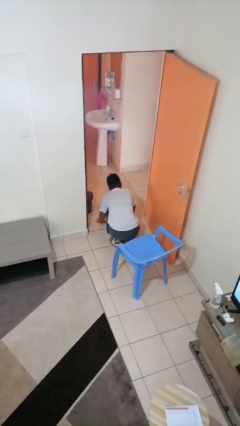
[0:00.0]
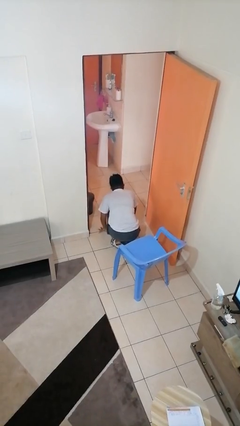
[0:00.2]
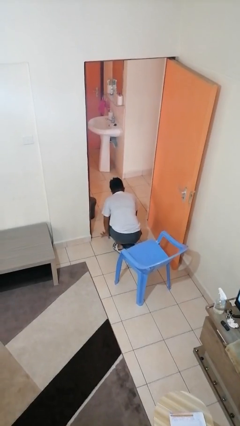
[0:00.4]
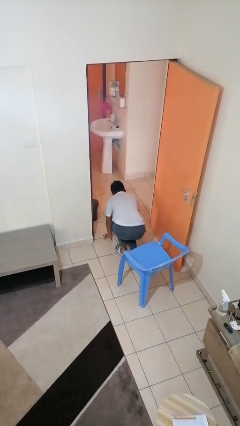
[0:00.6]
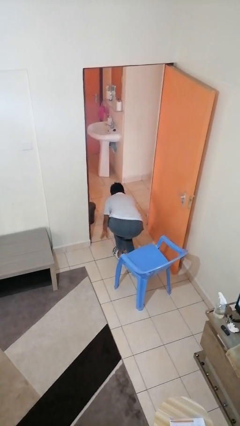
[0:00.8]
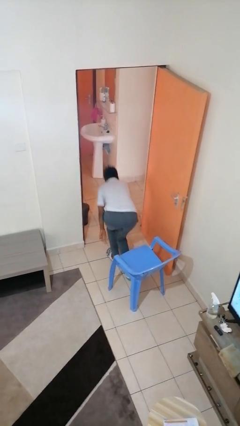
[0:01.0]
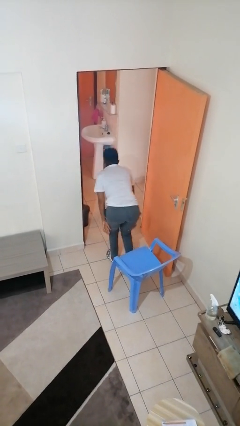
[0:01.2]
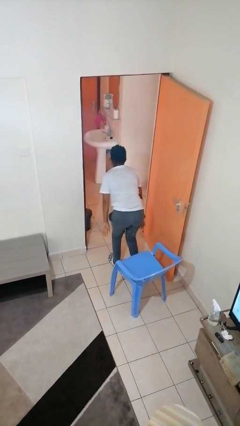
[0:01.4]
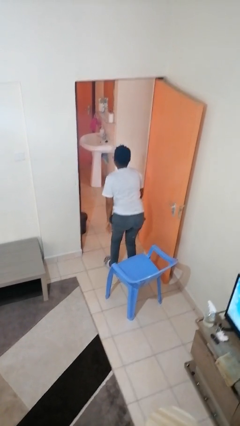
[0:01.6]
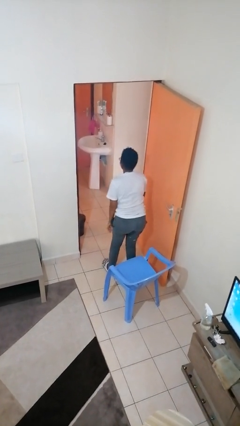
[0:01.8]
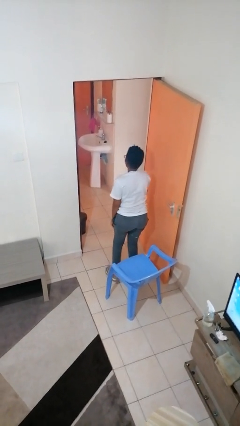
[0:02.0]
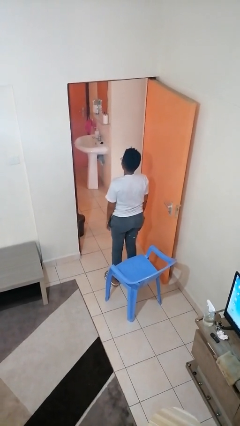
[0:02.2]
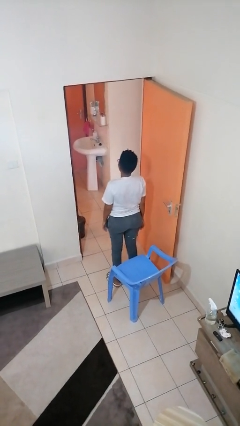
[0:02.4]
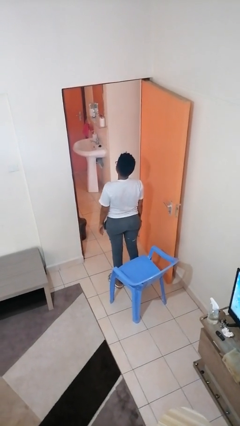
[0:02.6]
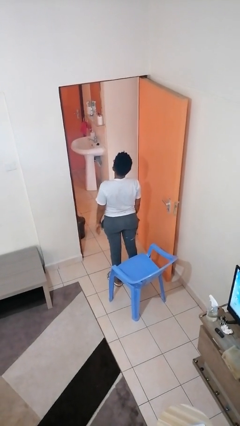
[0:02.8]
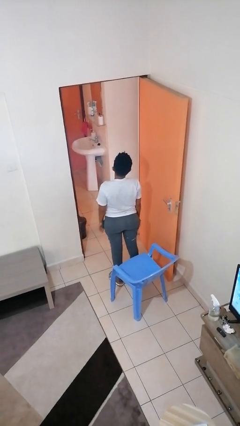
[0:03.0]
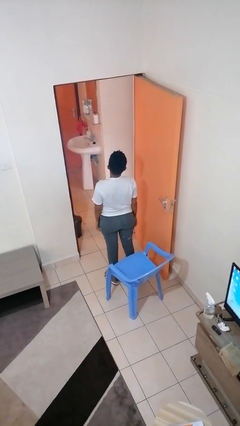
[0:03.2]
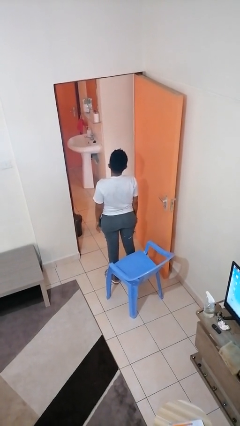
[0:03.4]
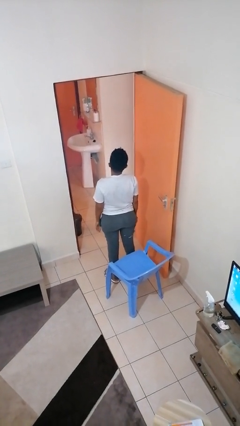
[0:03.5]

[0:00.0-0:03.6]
person stands up from floor

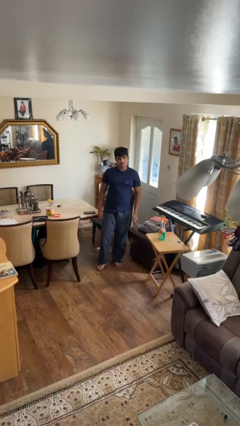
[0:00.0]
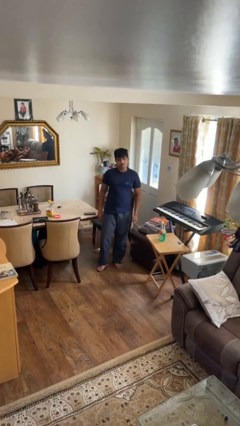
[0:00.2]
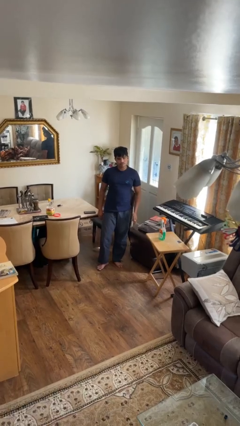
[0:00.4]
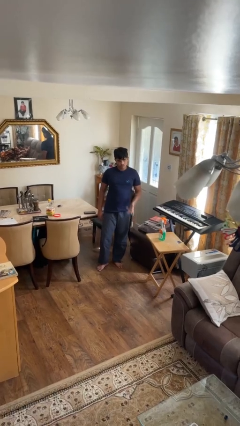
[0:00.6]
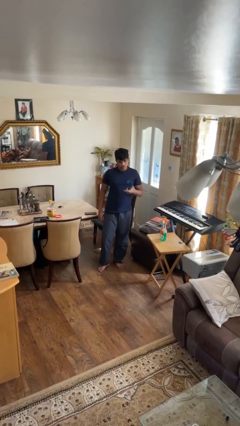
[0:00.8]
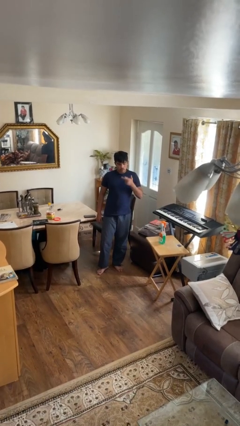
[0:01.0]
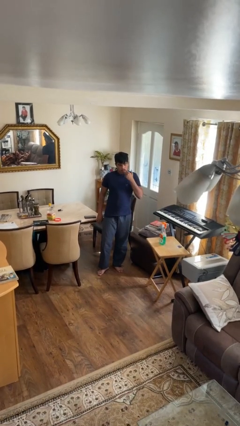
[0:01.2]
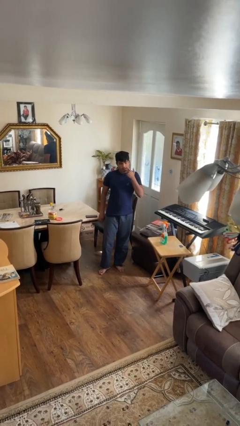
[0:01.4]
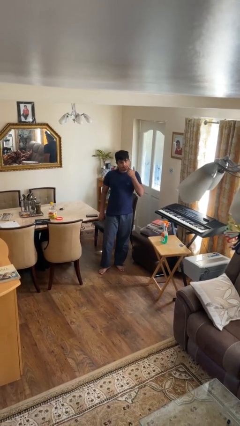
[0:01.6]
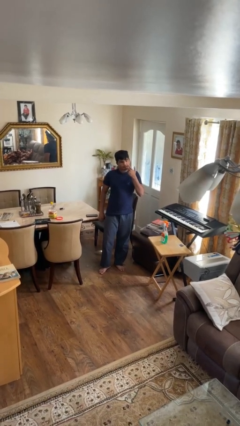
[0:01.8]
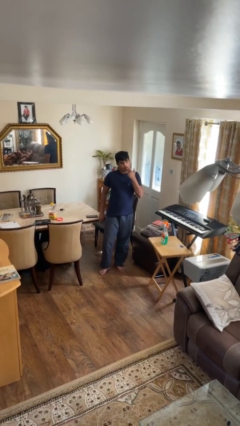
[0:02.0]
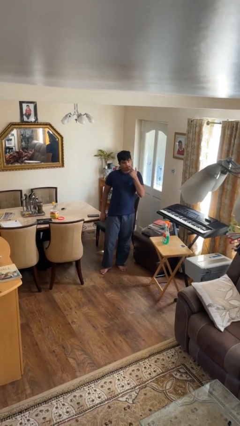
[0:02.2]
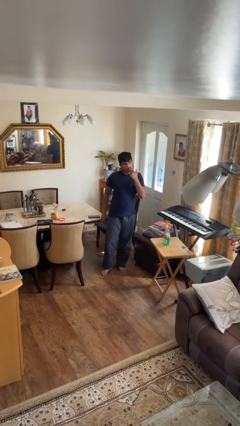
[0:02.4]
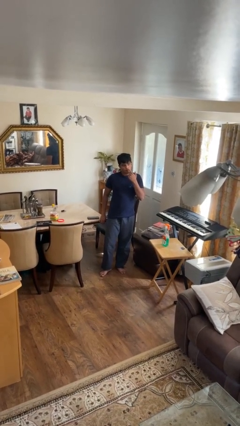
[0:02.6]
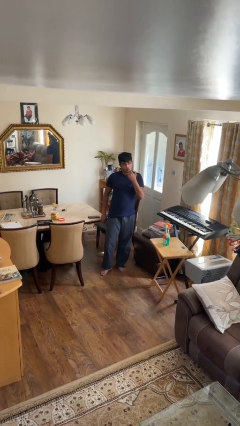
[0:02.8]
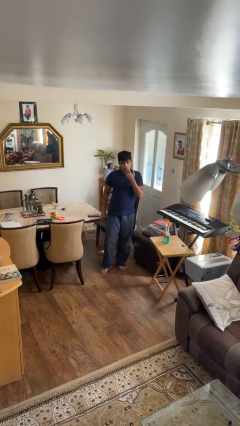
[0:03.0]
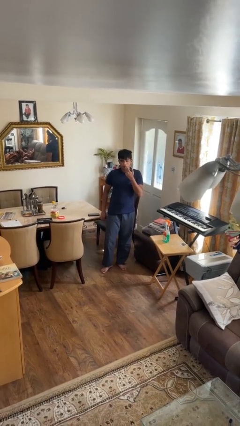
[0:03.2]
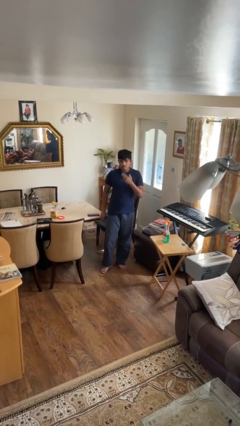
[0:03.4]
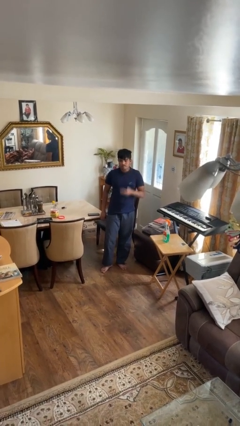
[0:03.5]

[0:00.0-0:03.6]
person licks fingers

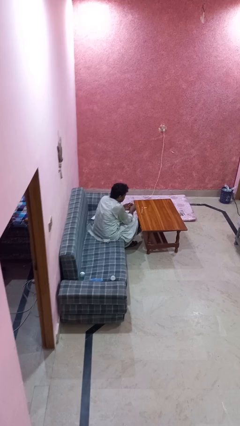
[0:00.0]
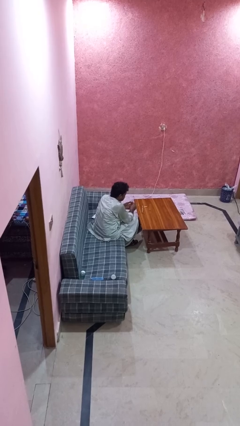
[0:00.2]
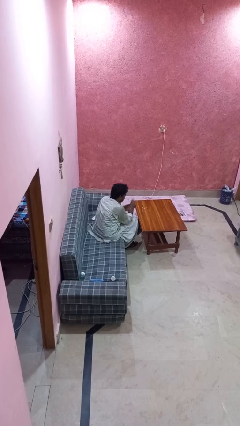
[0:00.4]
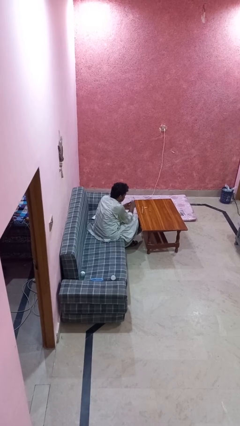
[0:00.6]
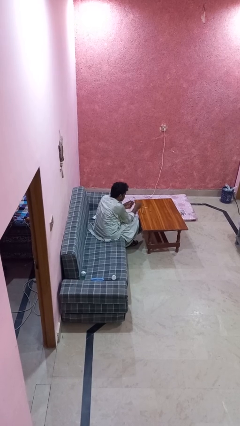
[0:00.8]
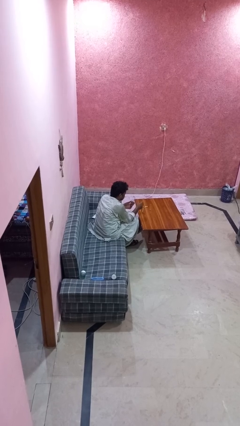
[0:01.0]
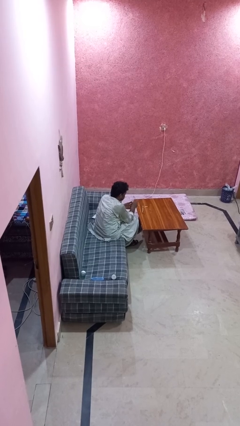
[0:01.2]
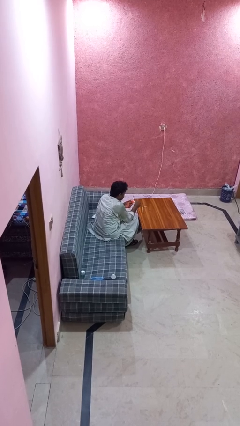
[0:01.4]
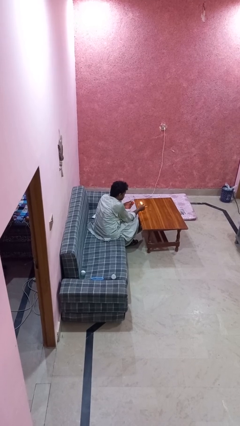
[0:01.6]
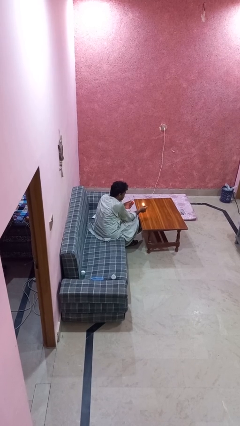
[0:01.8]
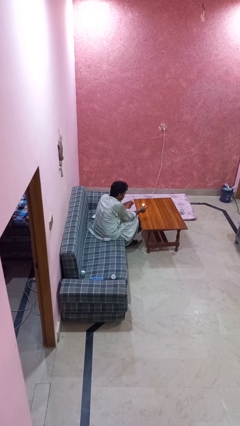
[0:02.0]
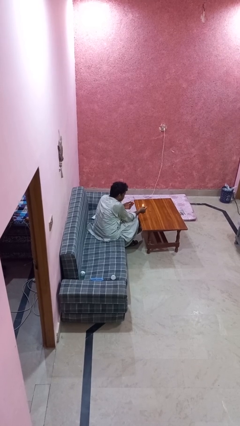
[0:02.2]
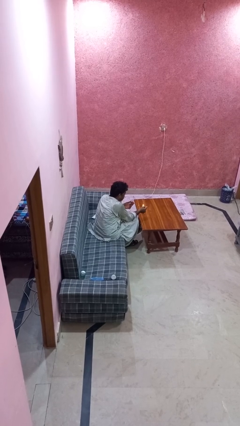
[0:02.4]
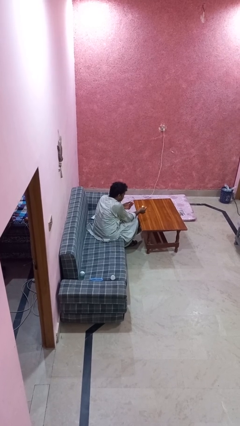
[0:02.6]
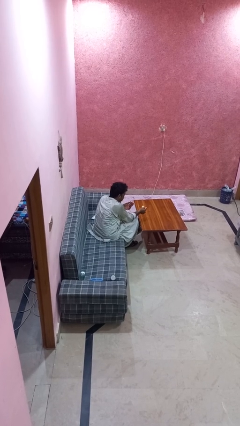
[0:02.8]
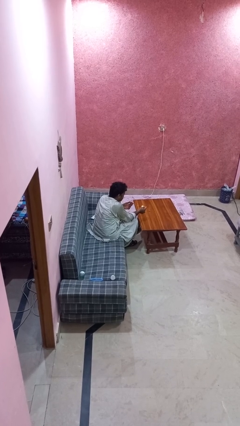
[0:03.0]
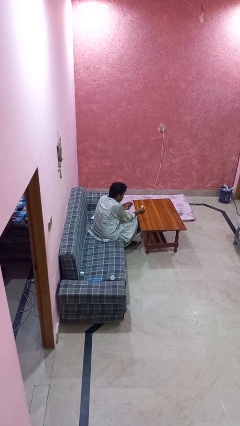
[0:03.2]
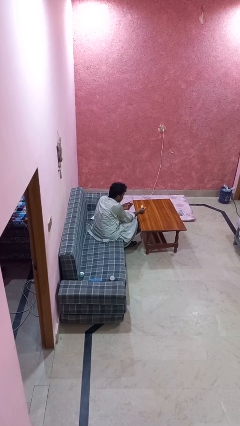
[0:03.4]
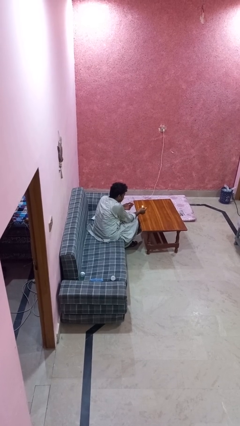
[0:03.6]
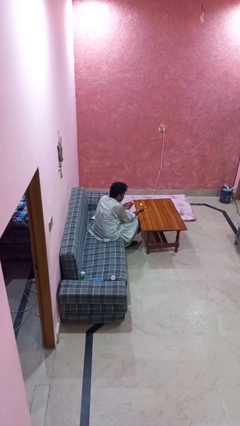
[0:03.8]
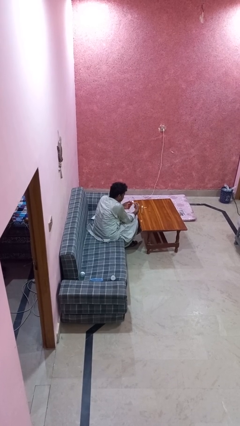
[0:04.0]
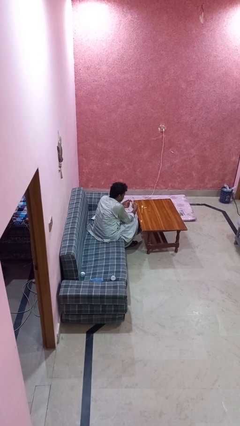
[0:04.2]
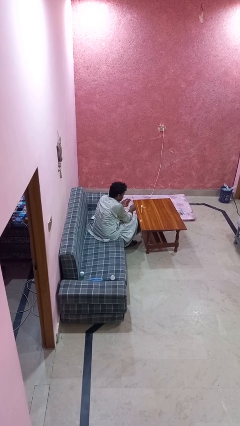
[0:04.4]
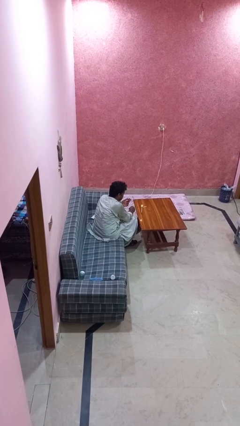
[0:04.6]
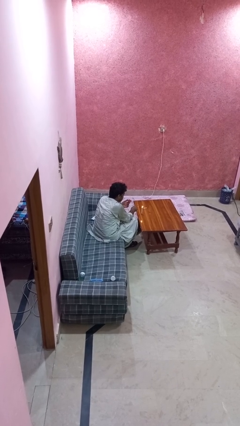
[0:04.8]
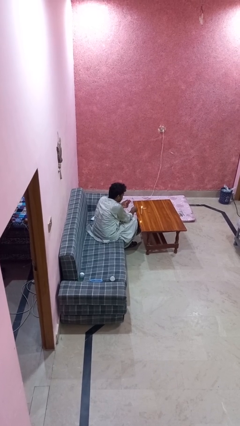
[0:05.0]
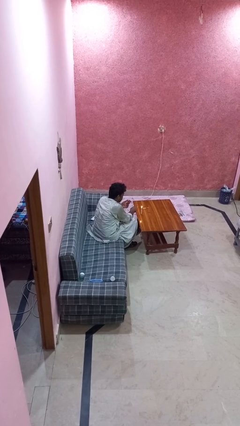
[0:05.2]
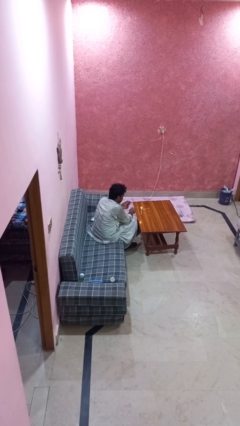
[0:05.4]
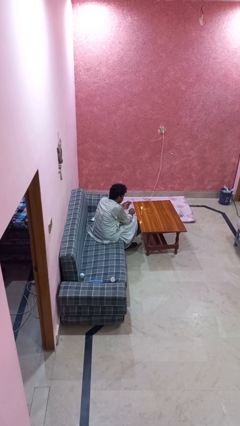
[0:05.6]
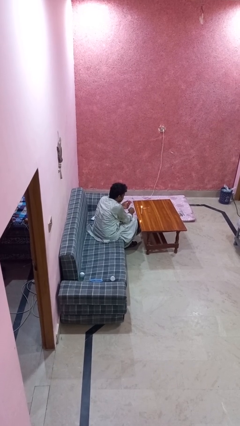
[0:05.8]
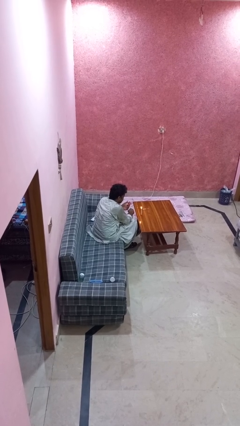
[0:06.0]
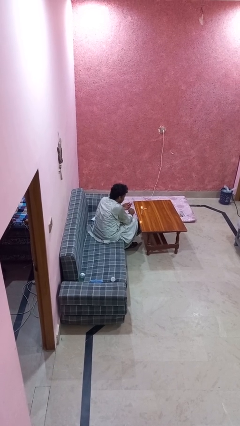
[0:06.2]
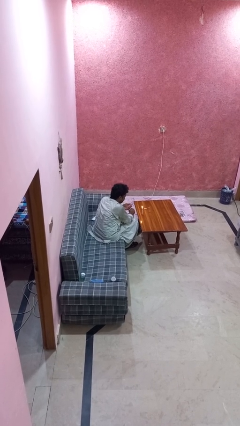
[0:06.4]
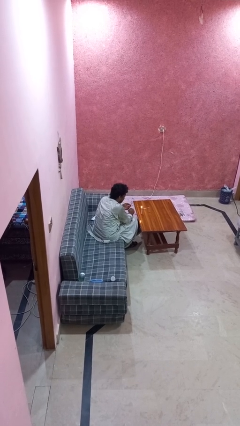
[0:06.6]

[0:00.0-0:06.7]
person lights candle

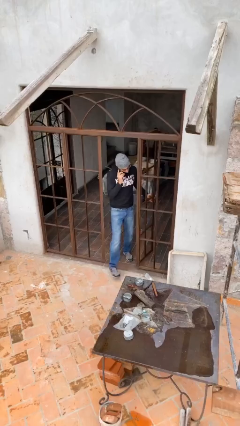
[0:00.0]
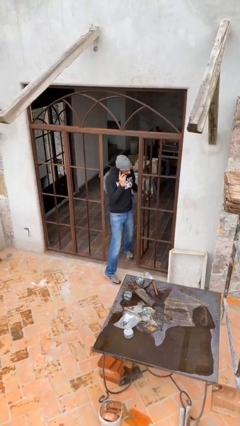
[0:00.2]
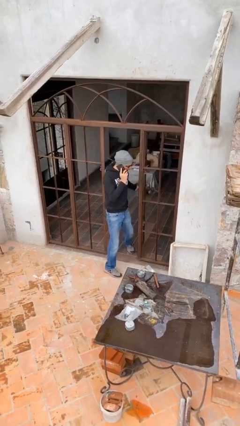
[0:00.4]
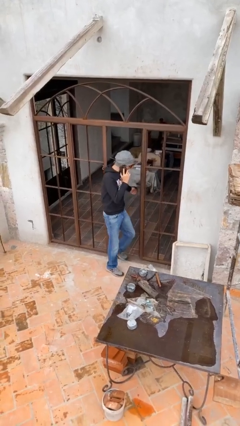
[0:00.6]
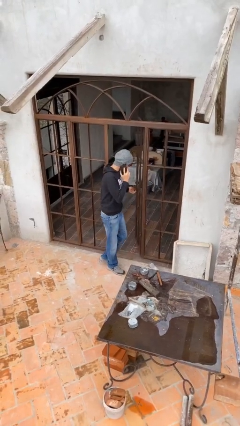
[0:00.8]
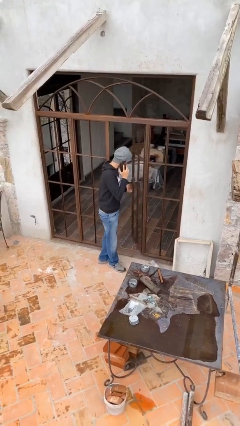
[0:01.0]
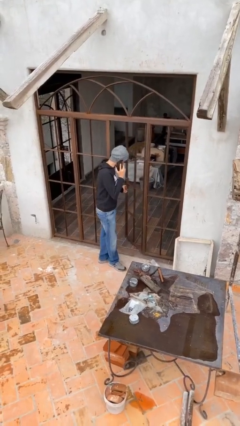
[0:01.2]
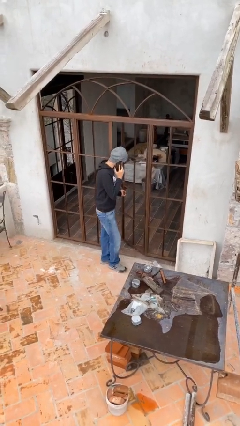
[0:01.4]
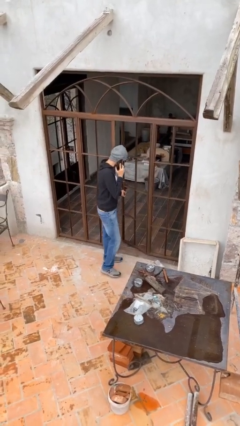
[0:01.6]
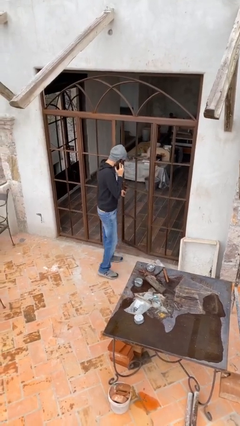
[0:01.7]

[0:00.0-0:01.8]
person enters scene through structure

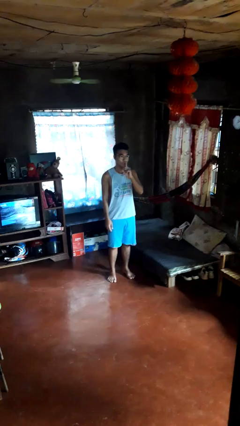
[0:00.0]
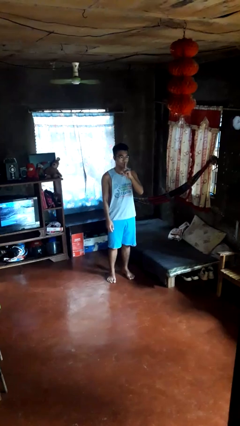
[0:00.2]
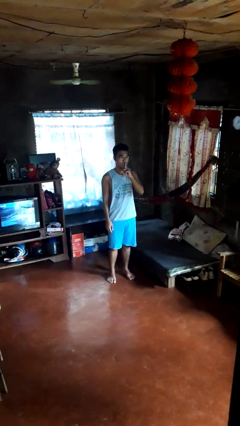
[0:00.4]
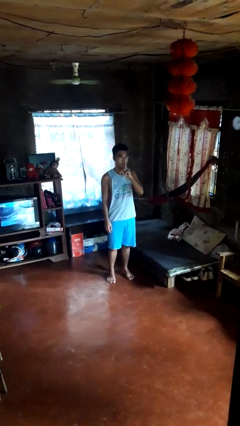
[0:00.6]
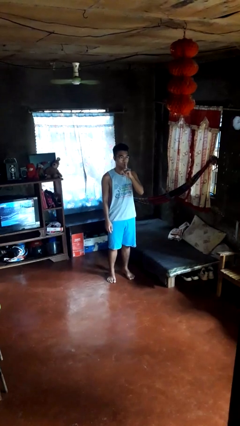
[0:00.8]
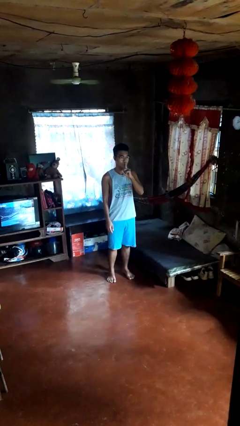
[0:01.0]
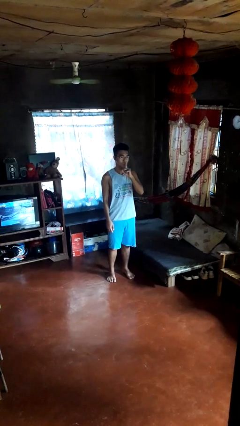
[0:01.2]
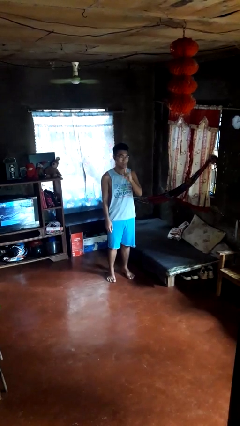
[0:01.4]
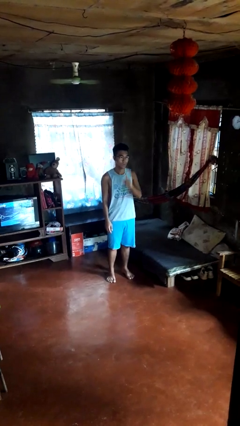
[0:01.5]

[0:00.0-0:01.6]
person gestures be quiet

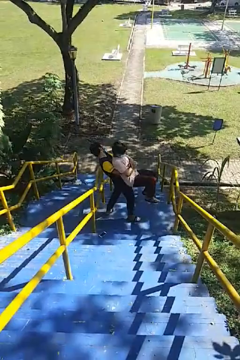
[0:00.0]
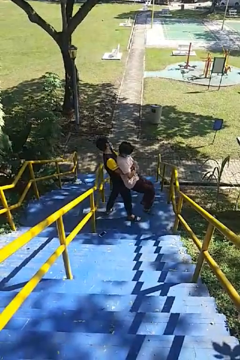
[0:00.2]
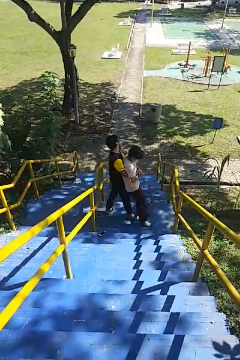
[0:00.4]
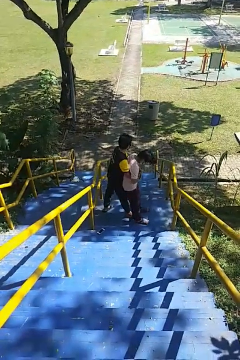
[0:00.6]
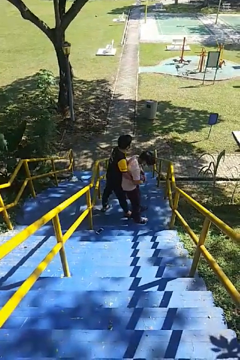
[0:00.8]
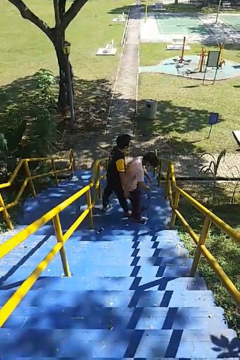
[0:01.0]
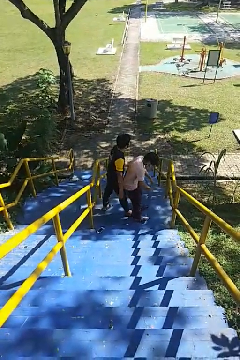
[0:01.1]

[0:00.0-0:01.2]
person puts down person
